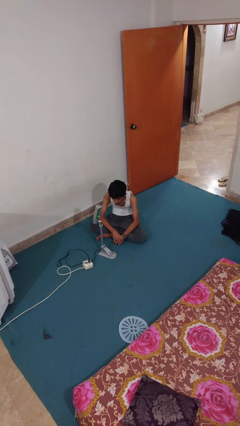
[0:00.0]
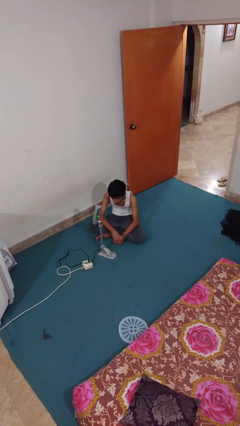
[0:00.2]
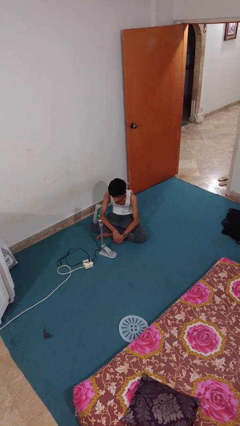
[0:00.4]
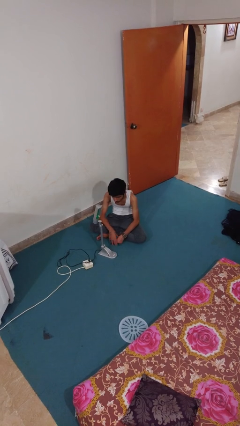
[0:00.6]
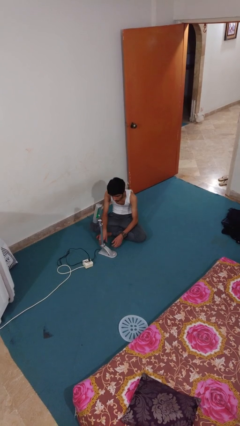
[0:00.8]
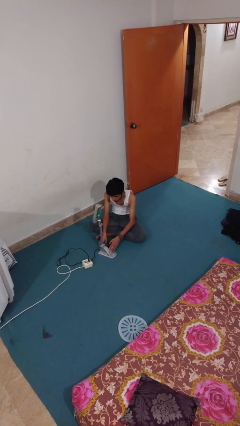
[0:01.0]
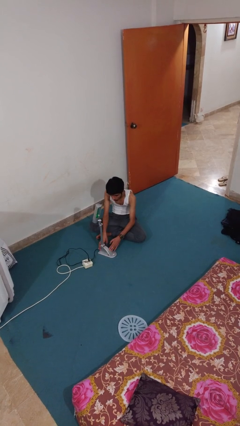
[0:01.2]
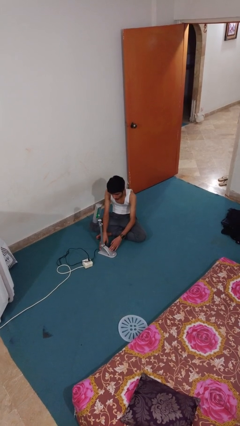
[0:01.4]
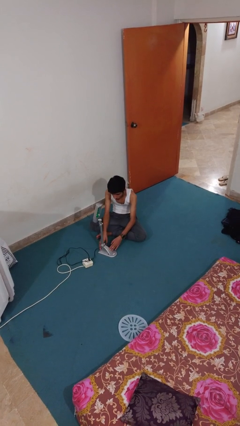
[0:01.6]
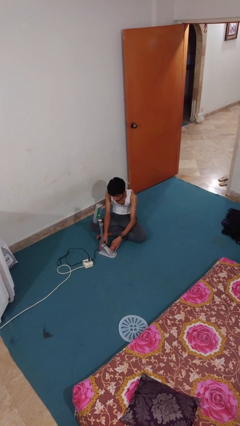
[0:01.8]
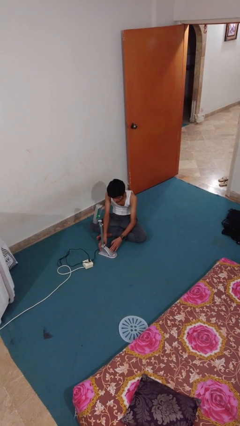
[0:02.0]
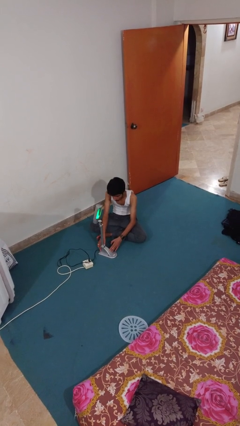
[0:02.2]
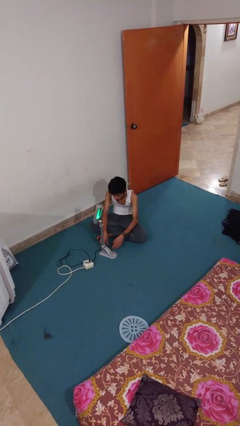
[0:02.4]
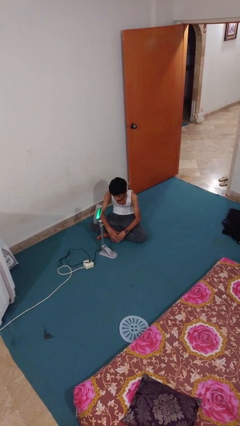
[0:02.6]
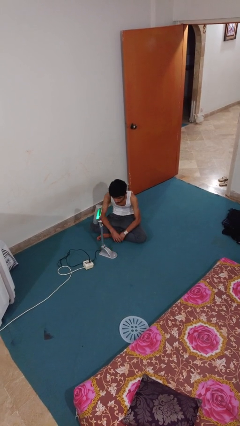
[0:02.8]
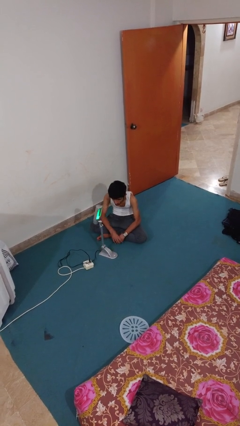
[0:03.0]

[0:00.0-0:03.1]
person turns on lamp

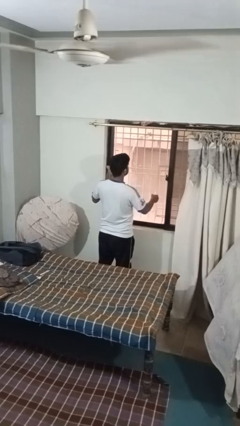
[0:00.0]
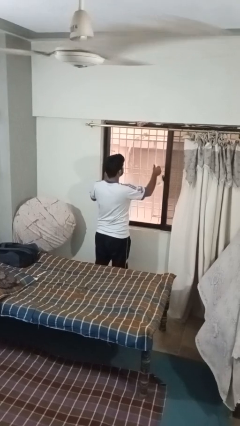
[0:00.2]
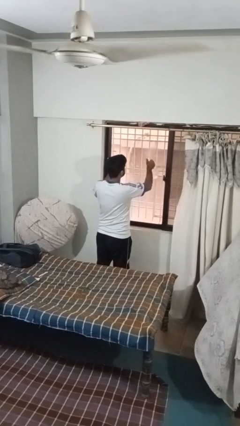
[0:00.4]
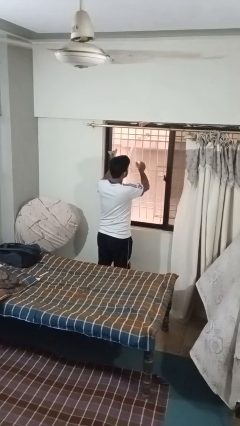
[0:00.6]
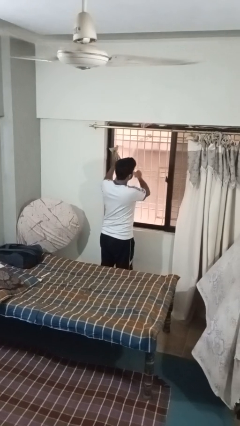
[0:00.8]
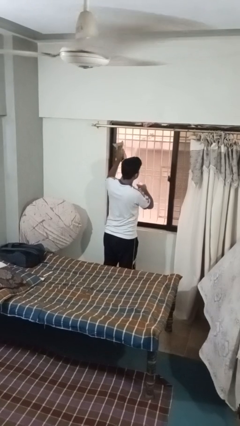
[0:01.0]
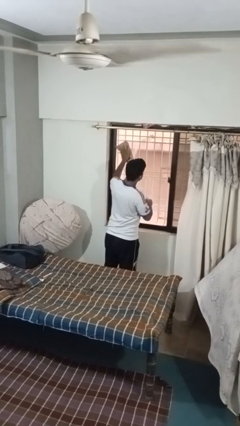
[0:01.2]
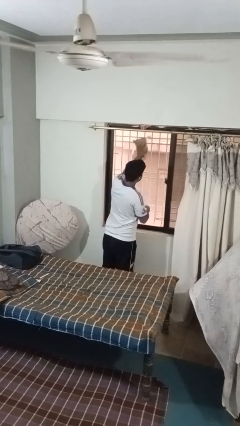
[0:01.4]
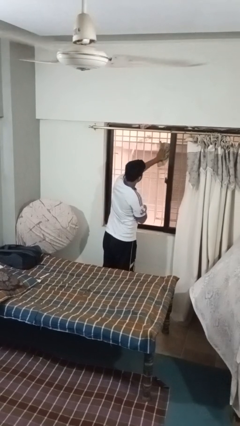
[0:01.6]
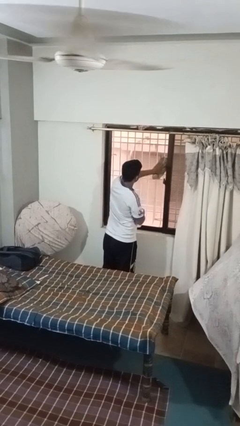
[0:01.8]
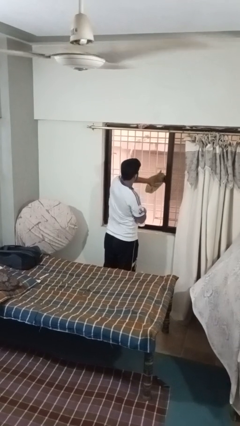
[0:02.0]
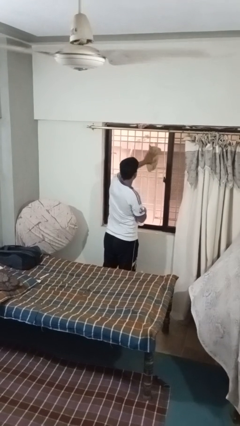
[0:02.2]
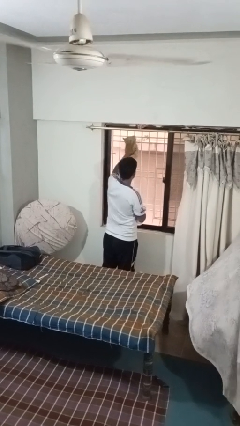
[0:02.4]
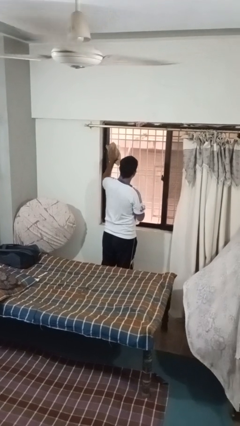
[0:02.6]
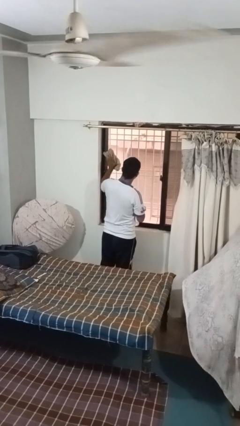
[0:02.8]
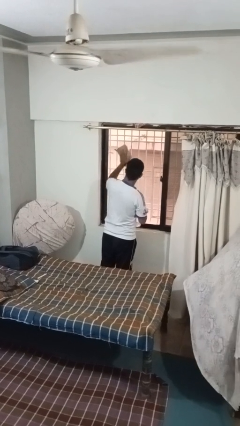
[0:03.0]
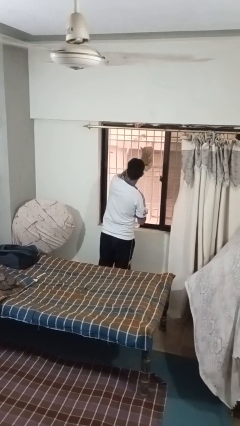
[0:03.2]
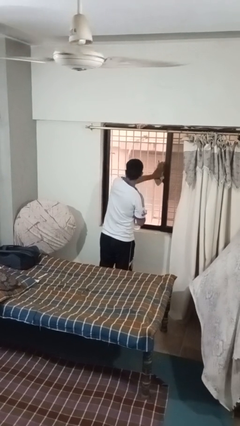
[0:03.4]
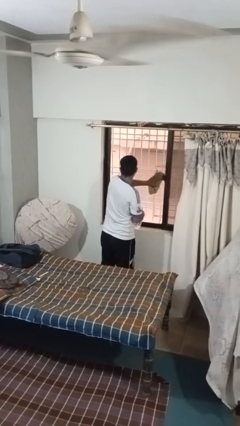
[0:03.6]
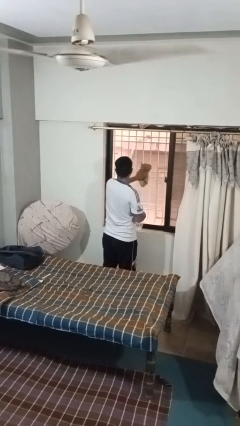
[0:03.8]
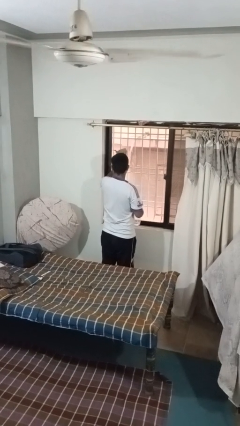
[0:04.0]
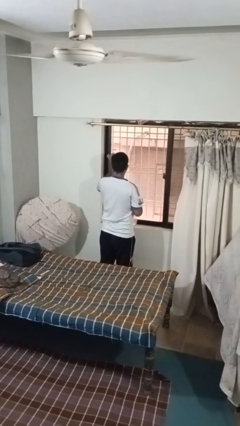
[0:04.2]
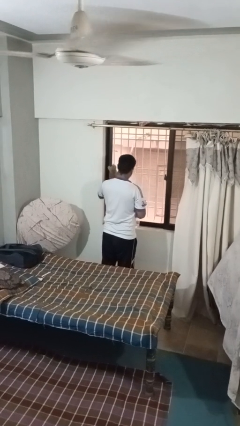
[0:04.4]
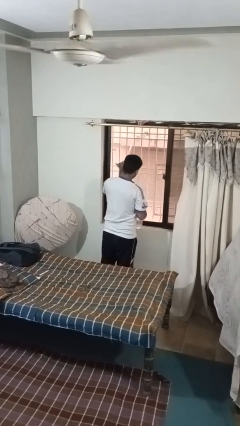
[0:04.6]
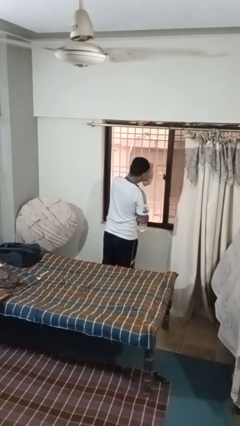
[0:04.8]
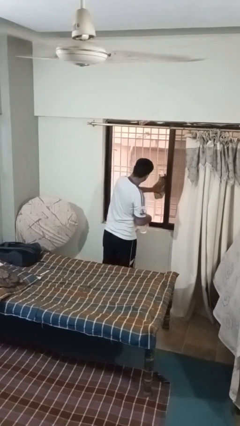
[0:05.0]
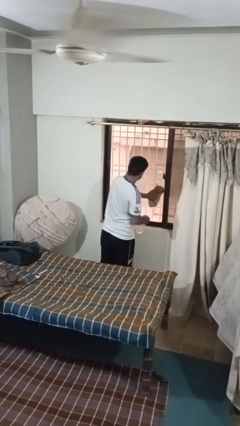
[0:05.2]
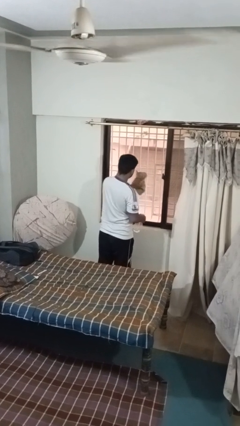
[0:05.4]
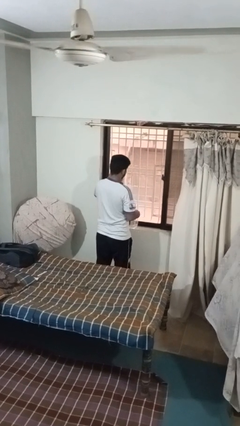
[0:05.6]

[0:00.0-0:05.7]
person washes window

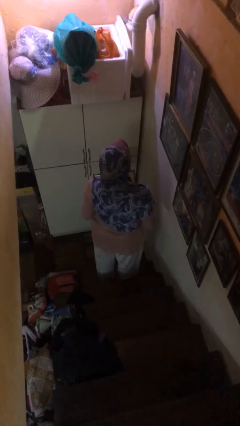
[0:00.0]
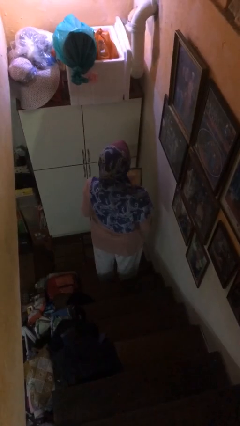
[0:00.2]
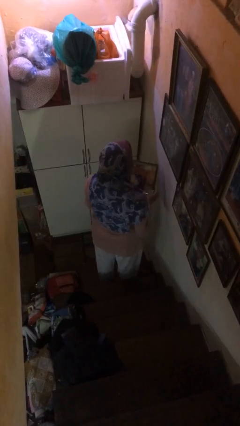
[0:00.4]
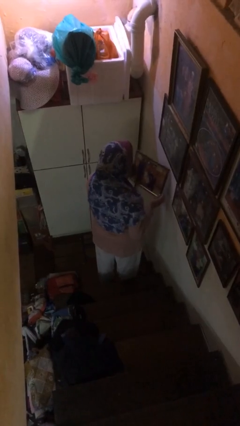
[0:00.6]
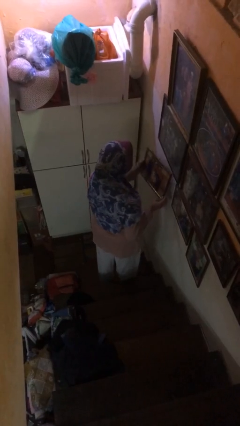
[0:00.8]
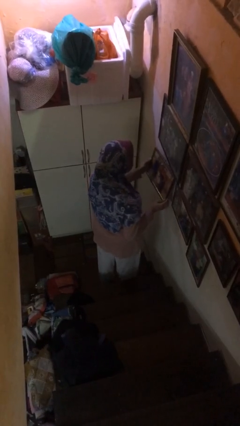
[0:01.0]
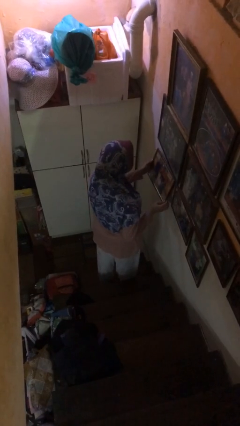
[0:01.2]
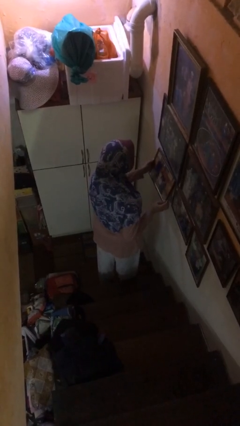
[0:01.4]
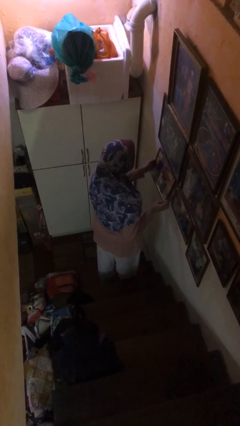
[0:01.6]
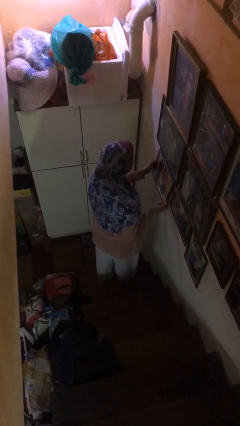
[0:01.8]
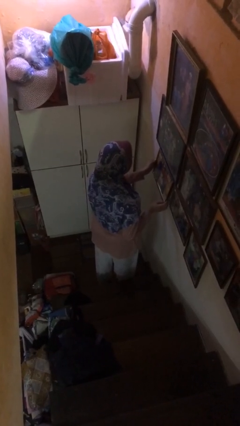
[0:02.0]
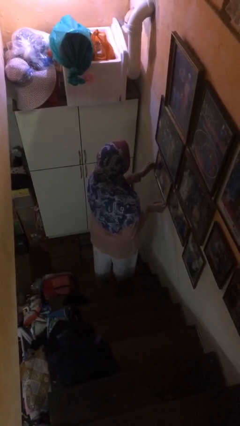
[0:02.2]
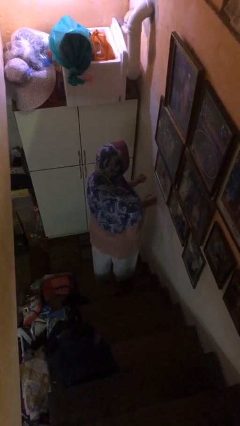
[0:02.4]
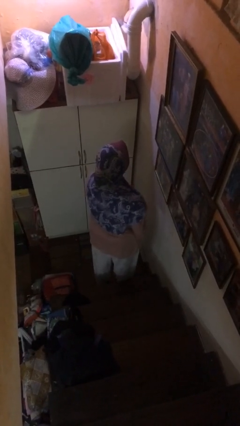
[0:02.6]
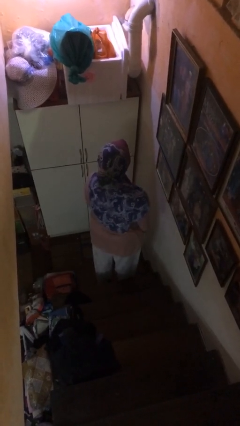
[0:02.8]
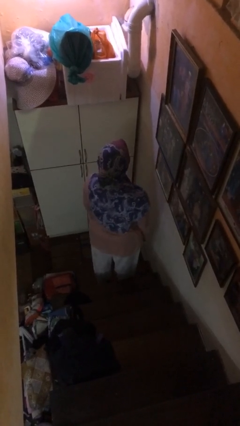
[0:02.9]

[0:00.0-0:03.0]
person takes down picture frame

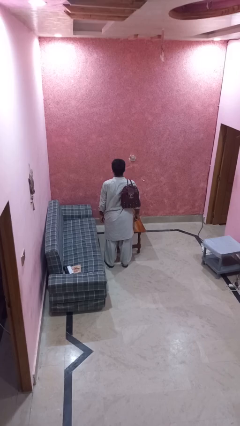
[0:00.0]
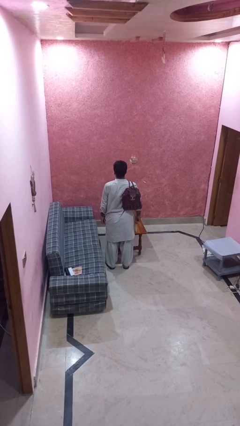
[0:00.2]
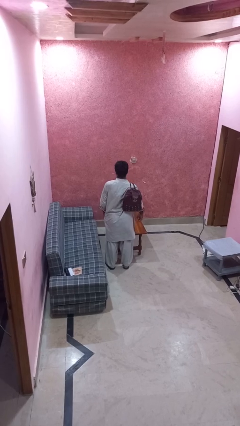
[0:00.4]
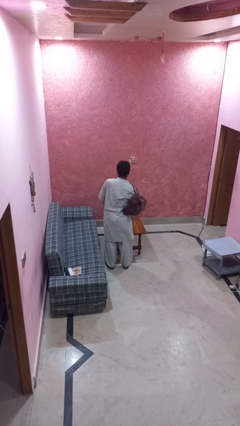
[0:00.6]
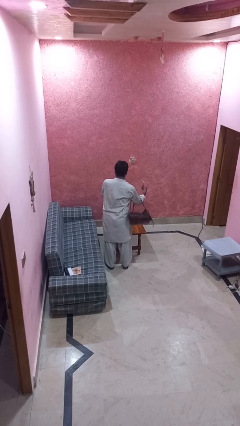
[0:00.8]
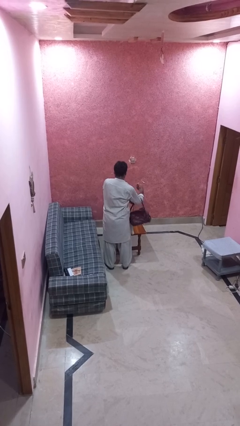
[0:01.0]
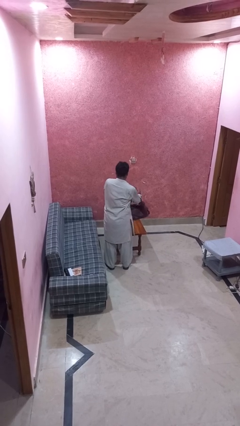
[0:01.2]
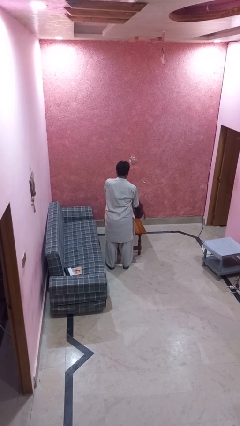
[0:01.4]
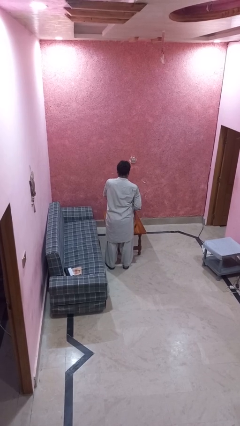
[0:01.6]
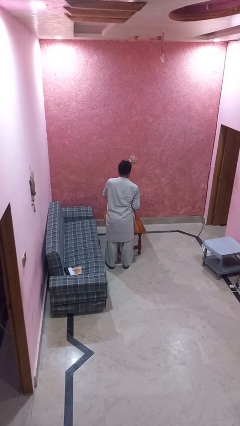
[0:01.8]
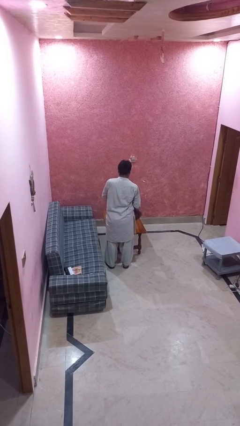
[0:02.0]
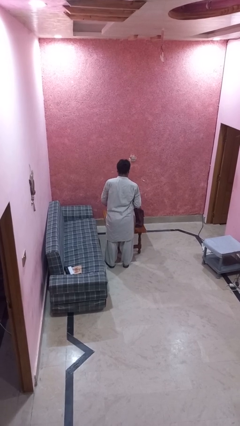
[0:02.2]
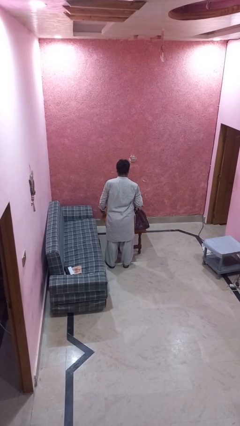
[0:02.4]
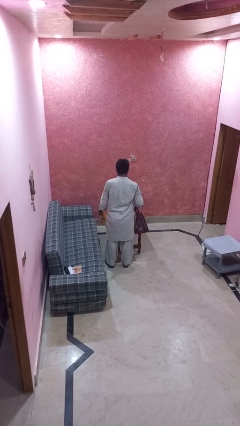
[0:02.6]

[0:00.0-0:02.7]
person takes off backpack

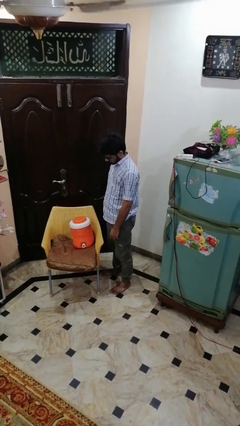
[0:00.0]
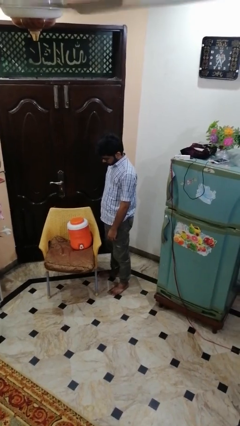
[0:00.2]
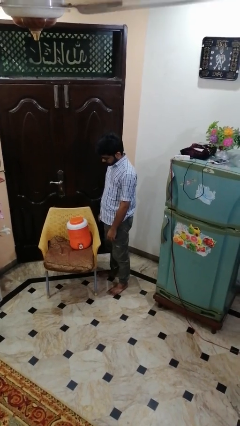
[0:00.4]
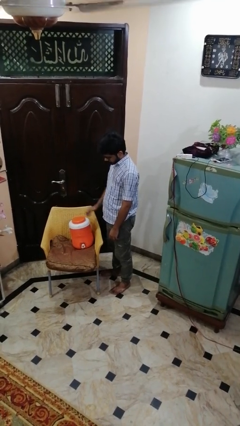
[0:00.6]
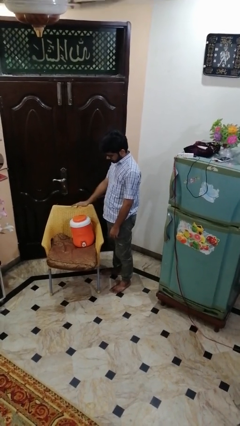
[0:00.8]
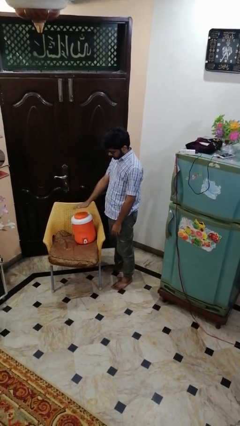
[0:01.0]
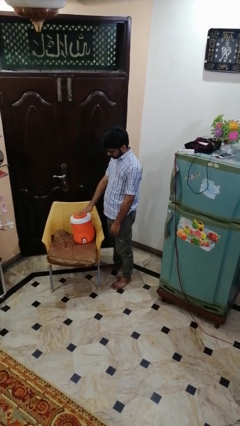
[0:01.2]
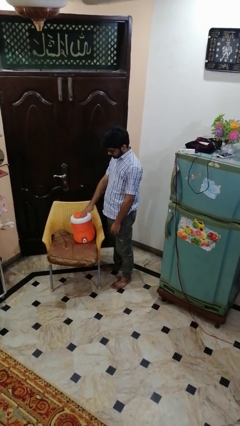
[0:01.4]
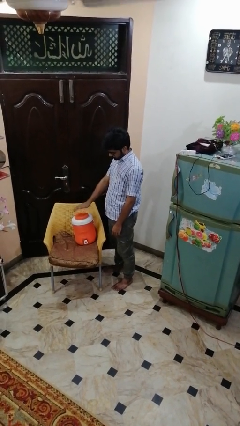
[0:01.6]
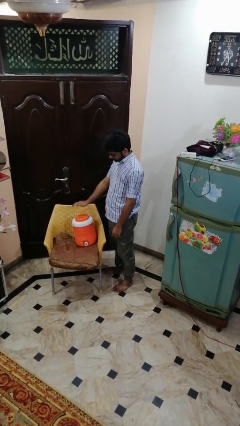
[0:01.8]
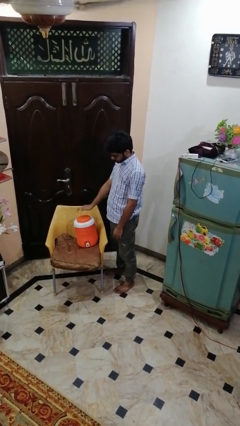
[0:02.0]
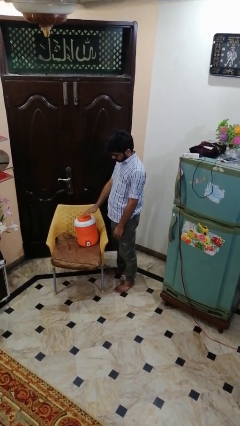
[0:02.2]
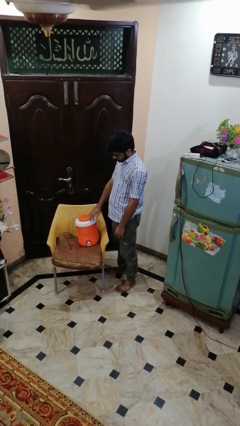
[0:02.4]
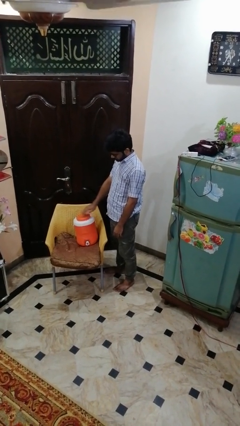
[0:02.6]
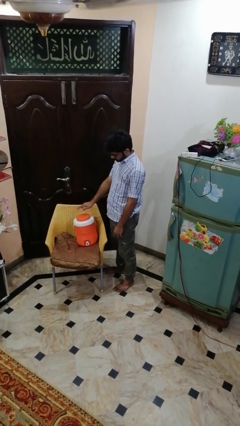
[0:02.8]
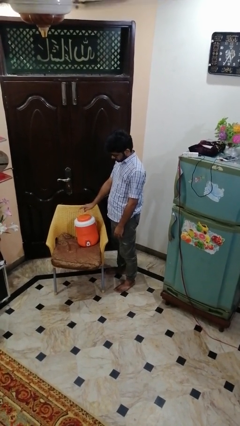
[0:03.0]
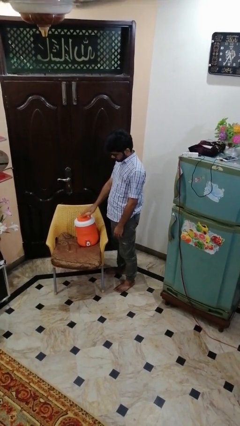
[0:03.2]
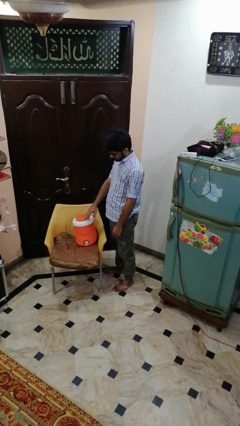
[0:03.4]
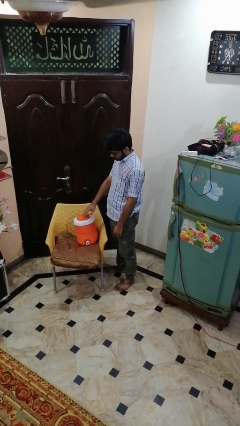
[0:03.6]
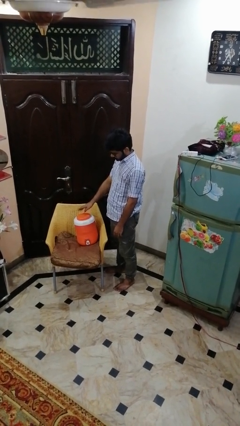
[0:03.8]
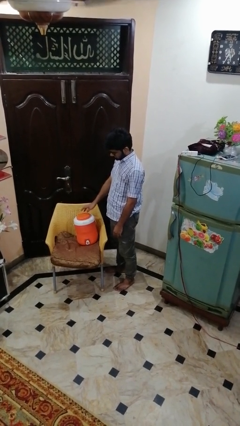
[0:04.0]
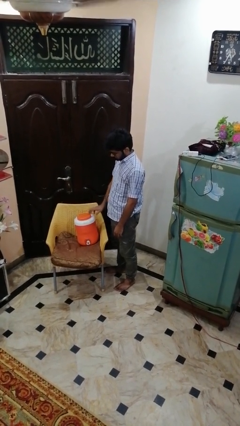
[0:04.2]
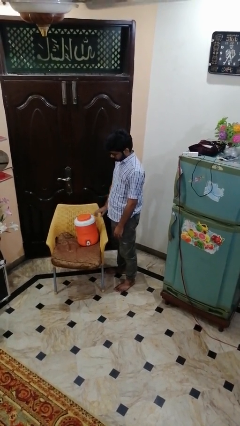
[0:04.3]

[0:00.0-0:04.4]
person waves hand over object
